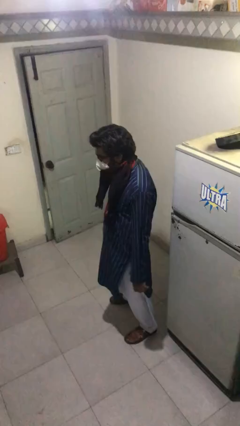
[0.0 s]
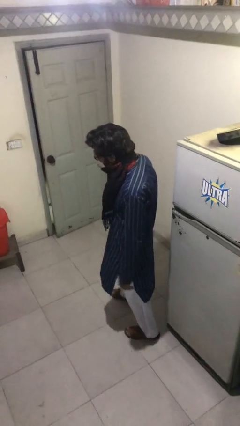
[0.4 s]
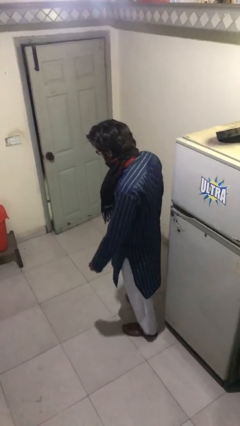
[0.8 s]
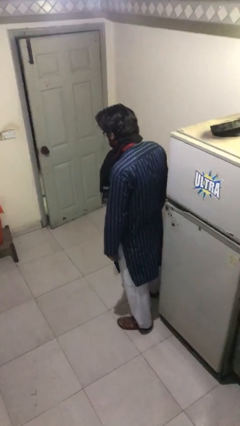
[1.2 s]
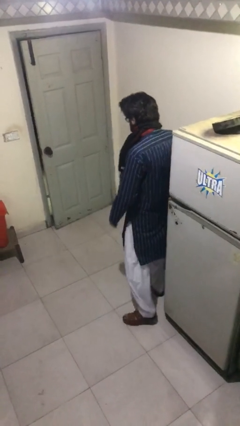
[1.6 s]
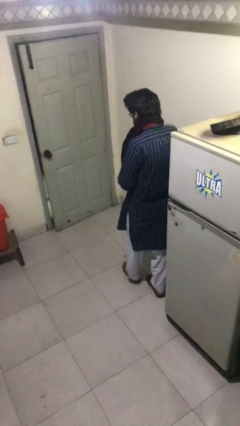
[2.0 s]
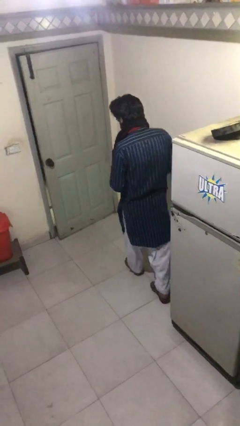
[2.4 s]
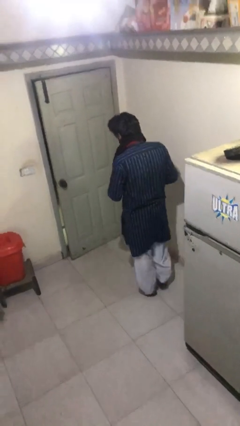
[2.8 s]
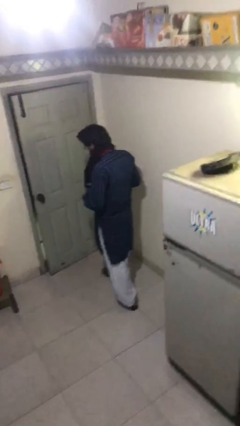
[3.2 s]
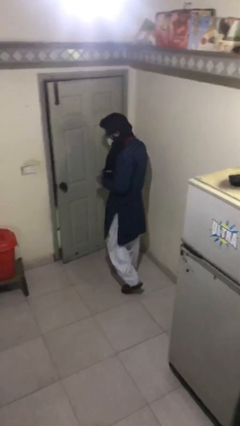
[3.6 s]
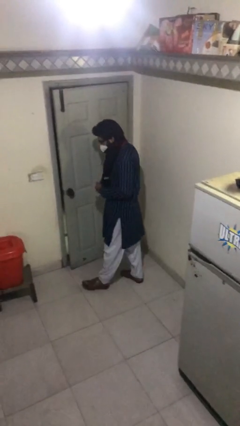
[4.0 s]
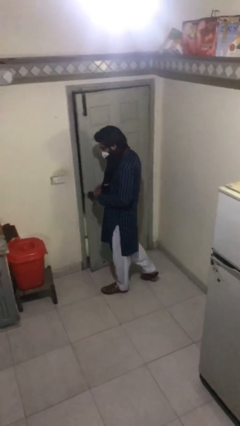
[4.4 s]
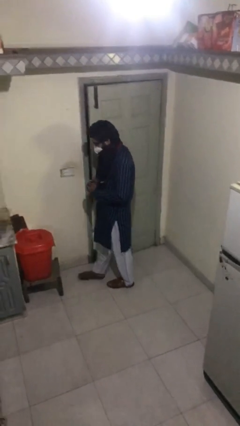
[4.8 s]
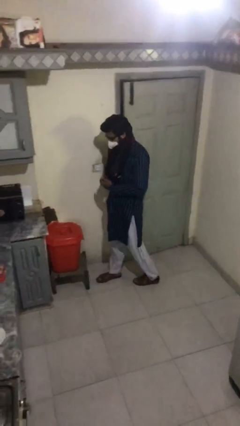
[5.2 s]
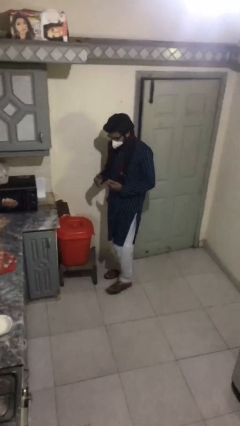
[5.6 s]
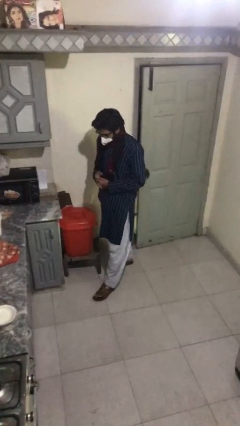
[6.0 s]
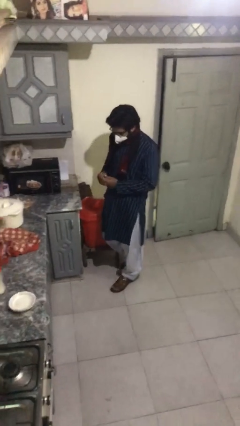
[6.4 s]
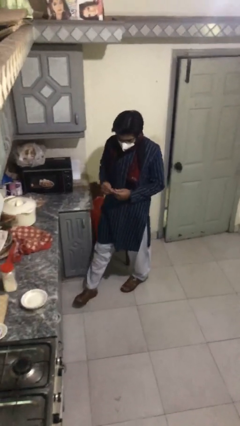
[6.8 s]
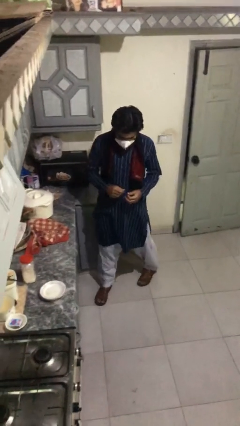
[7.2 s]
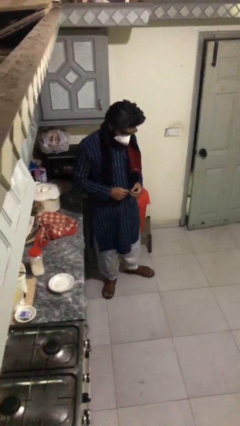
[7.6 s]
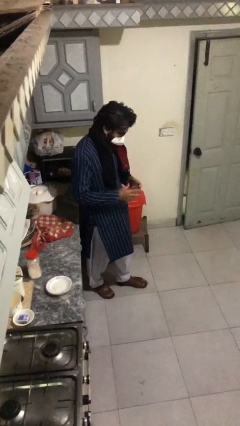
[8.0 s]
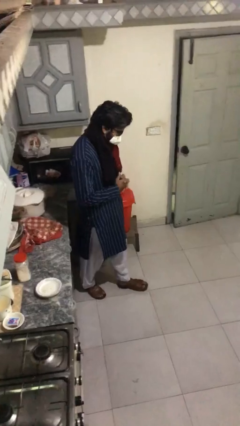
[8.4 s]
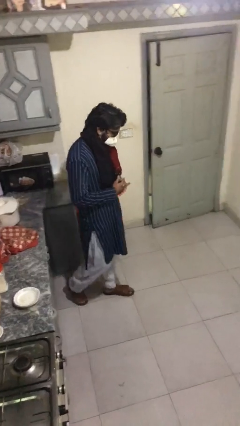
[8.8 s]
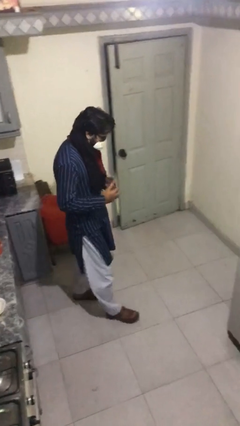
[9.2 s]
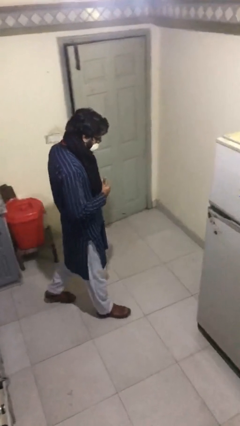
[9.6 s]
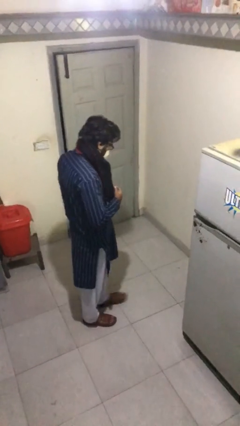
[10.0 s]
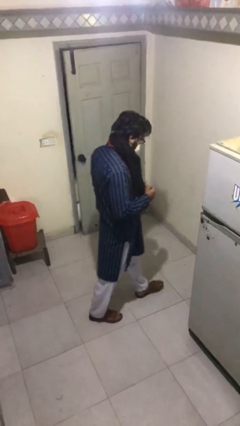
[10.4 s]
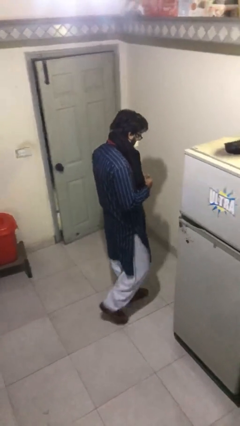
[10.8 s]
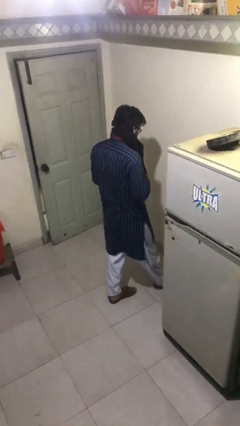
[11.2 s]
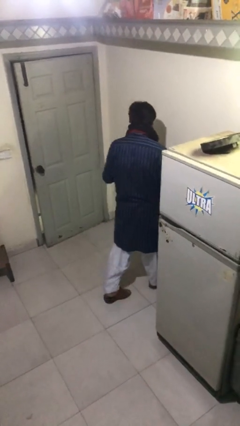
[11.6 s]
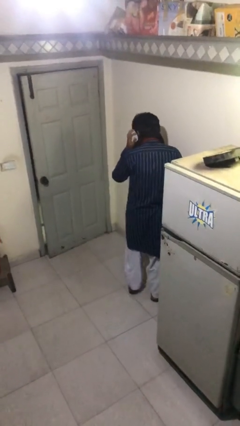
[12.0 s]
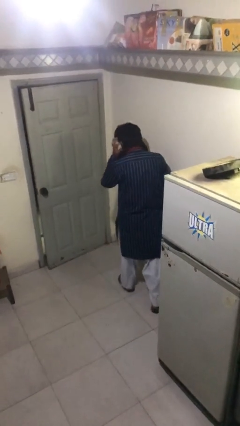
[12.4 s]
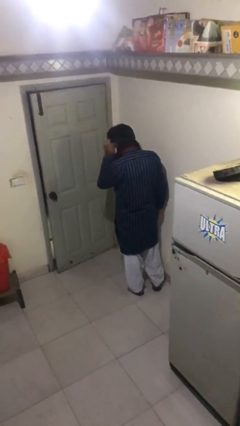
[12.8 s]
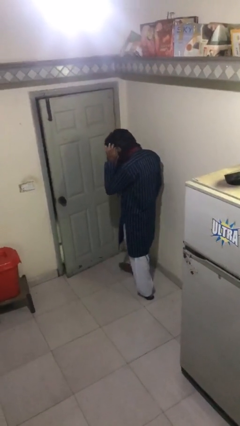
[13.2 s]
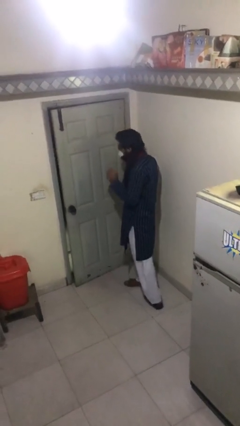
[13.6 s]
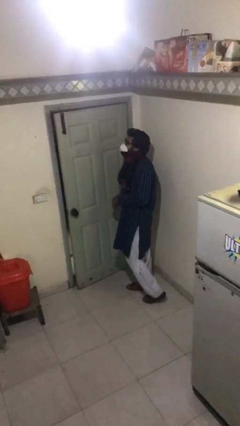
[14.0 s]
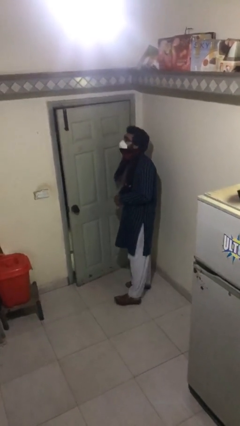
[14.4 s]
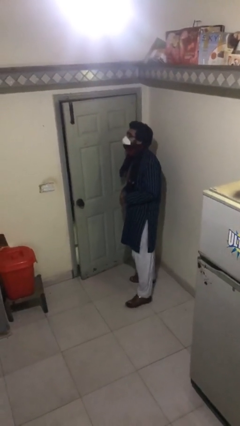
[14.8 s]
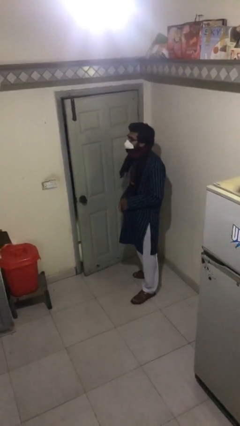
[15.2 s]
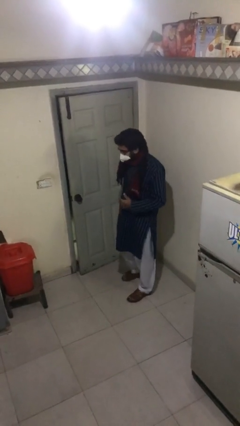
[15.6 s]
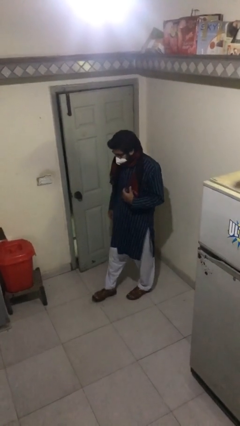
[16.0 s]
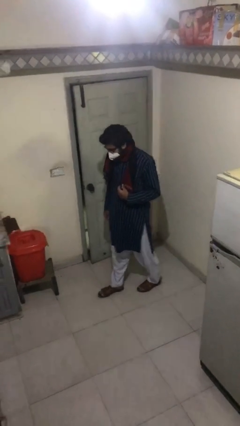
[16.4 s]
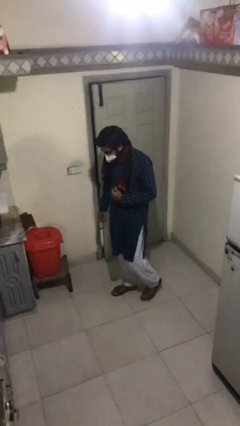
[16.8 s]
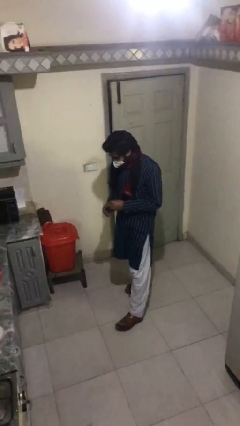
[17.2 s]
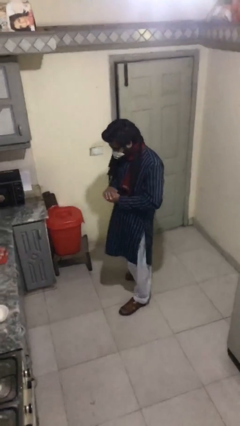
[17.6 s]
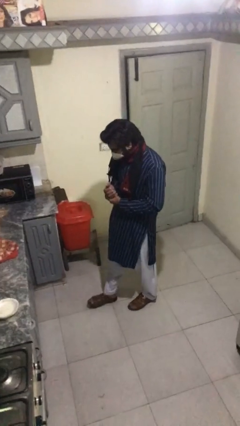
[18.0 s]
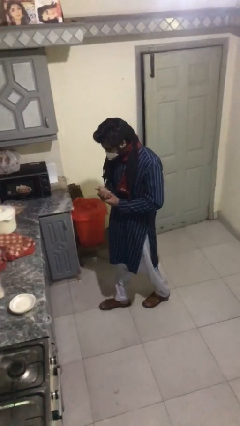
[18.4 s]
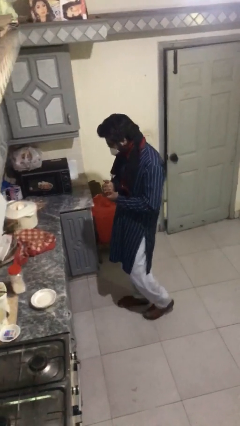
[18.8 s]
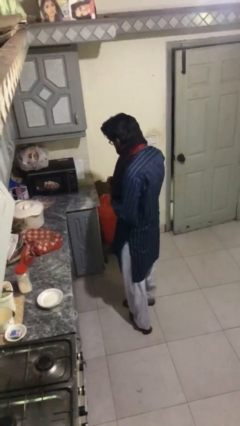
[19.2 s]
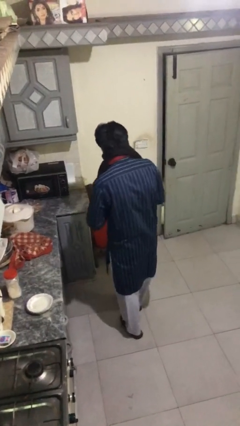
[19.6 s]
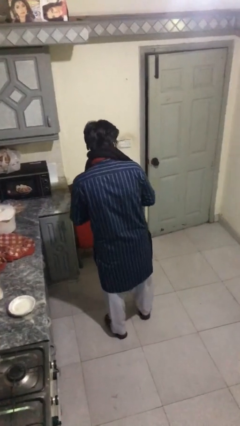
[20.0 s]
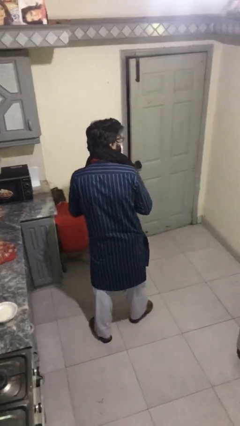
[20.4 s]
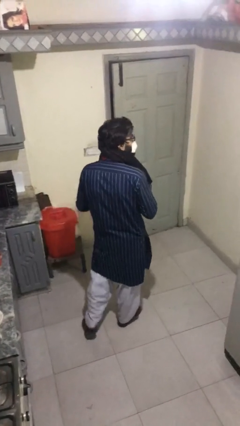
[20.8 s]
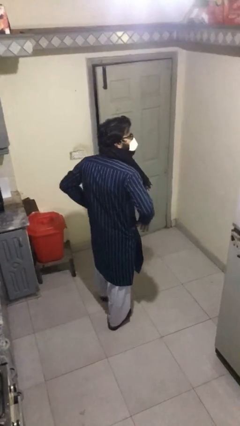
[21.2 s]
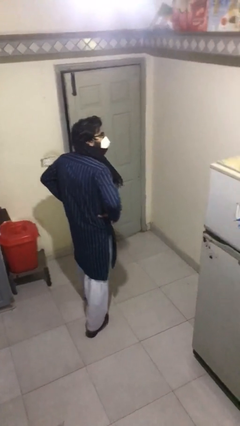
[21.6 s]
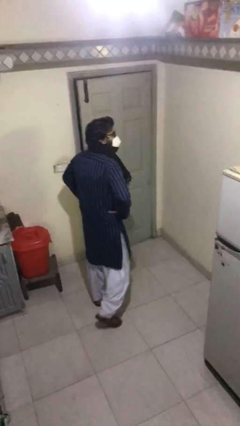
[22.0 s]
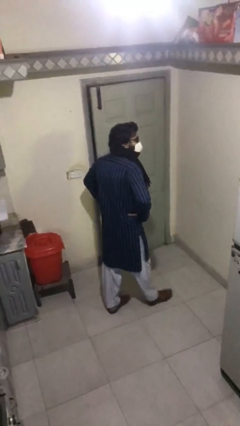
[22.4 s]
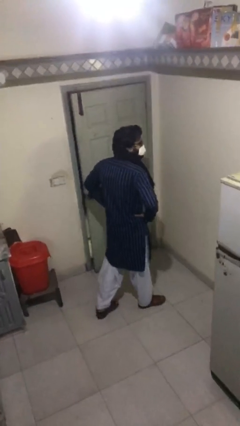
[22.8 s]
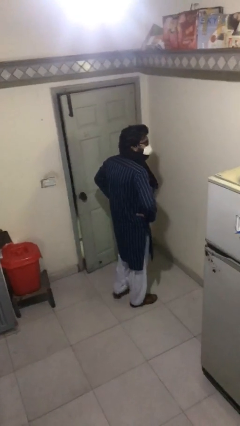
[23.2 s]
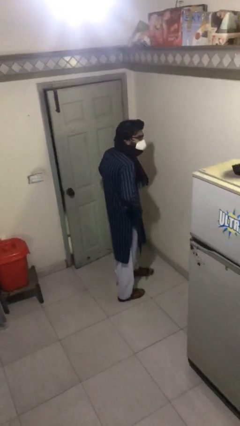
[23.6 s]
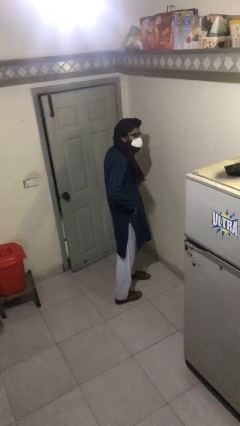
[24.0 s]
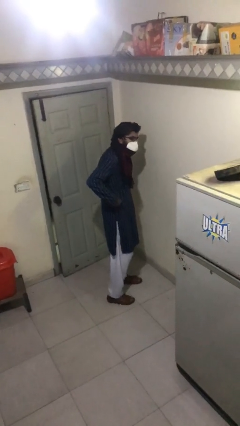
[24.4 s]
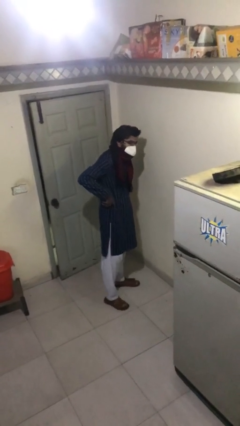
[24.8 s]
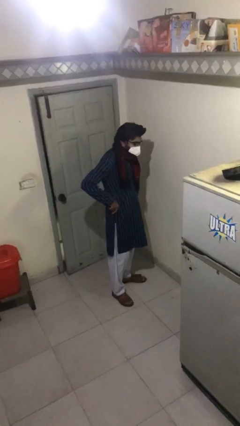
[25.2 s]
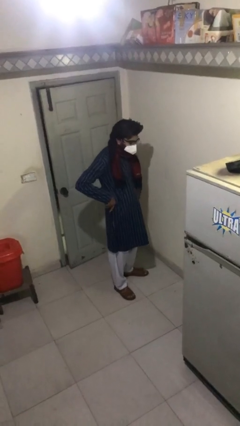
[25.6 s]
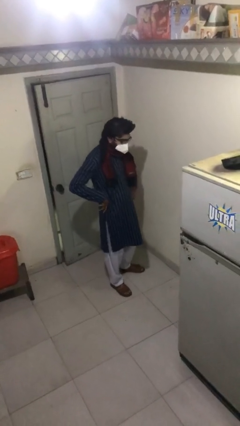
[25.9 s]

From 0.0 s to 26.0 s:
person walks

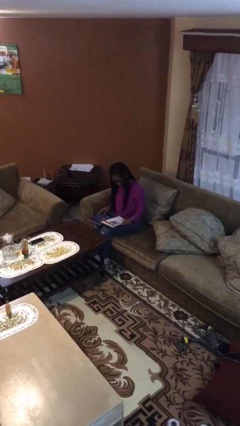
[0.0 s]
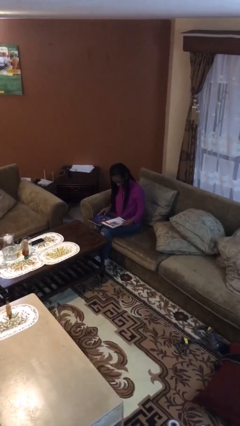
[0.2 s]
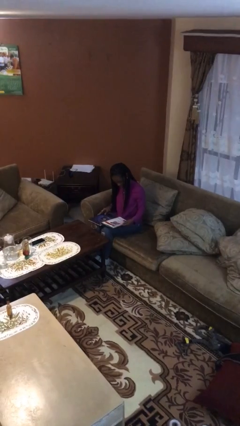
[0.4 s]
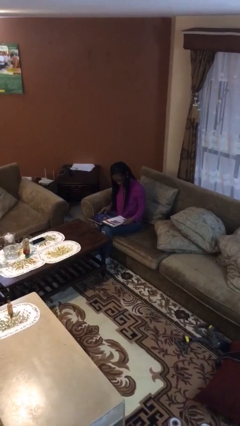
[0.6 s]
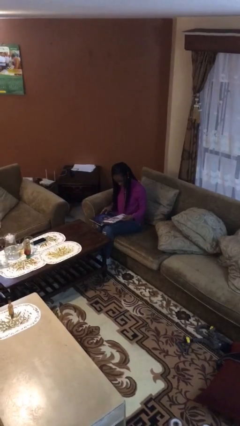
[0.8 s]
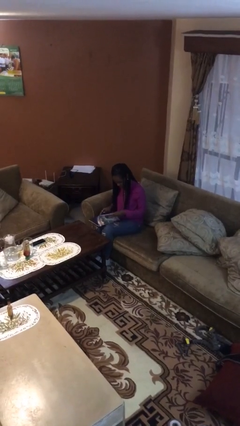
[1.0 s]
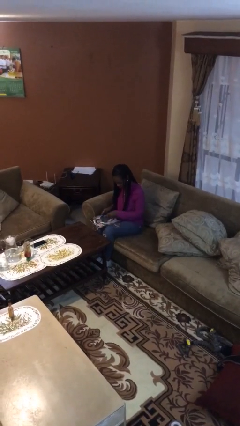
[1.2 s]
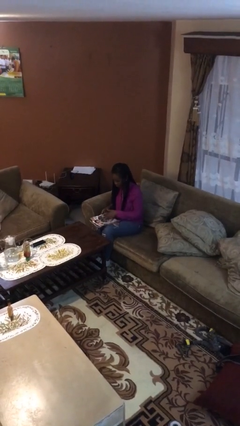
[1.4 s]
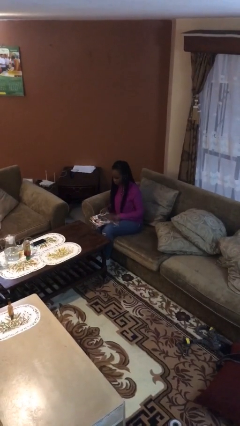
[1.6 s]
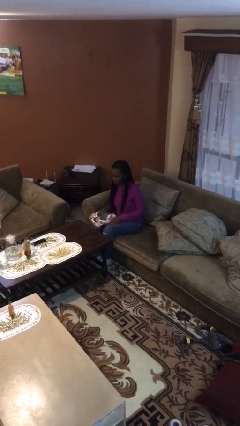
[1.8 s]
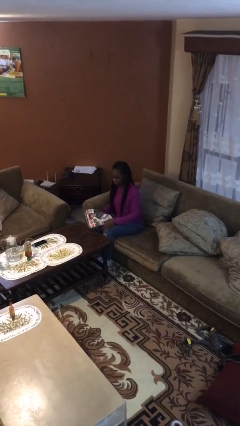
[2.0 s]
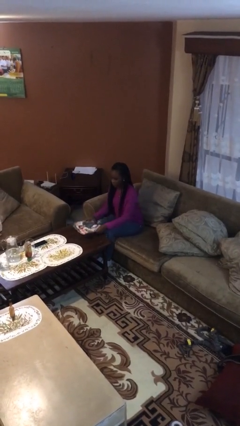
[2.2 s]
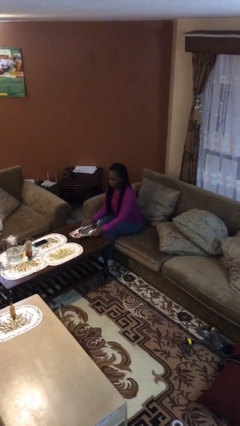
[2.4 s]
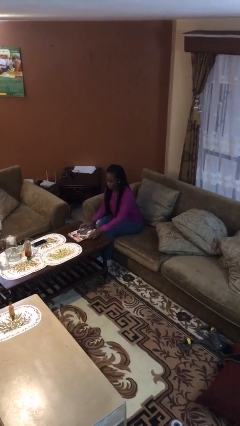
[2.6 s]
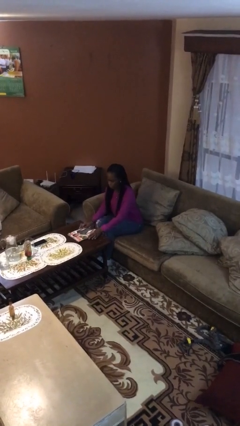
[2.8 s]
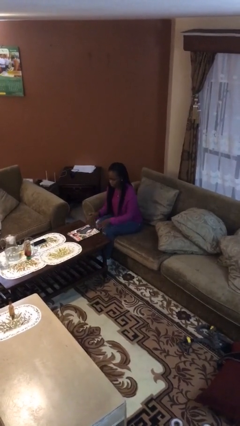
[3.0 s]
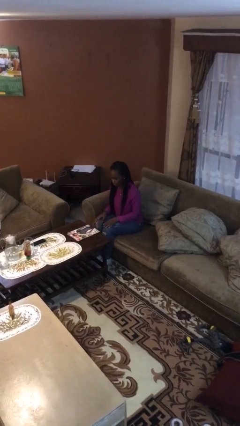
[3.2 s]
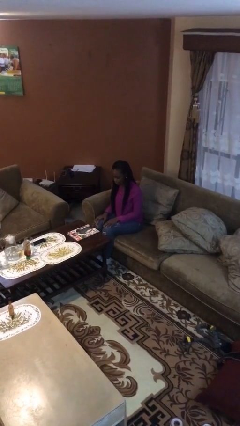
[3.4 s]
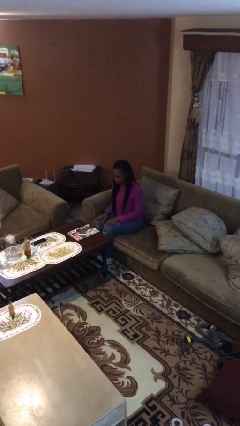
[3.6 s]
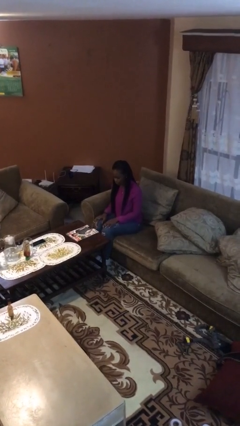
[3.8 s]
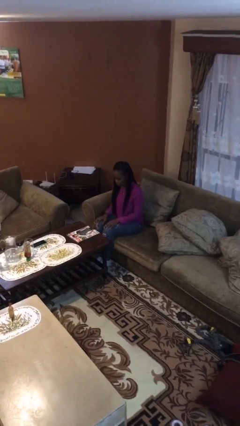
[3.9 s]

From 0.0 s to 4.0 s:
person puts down object on table

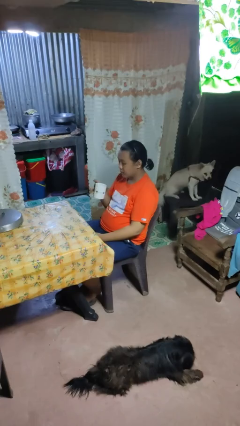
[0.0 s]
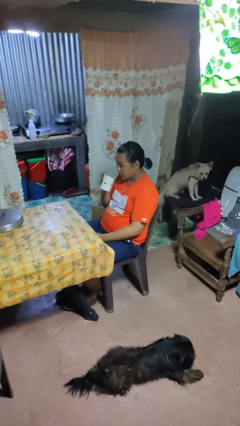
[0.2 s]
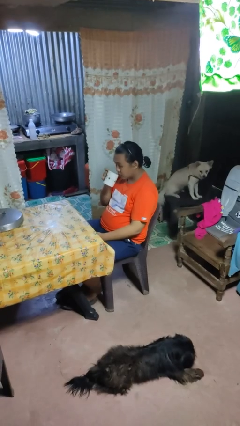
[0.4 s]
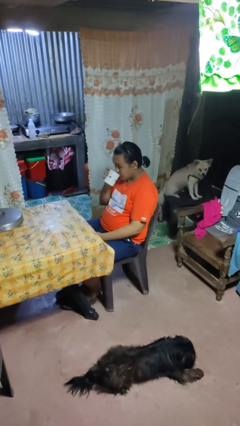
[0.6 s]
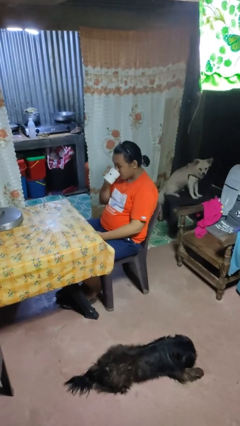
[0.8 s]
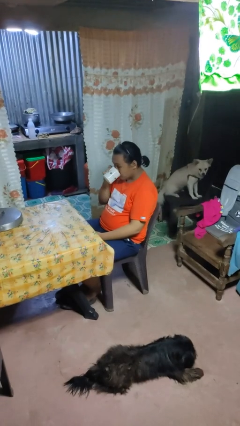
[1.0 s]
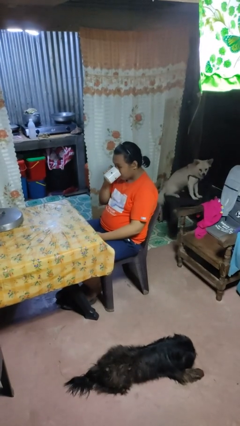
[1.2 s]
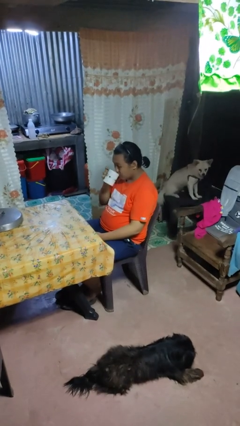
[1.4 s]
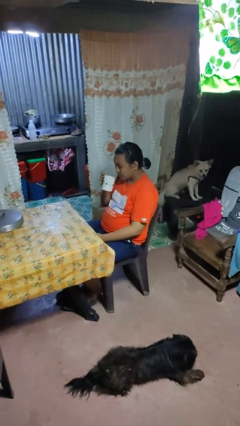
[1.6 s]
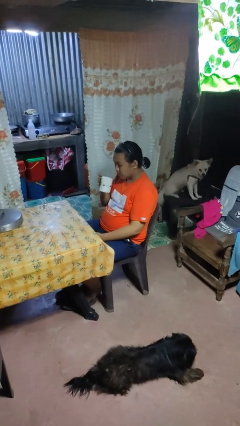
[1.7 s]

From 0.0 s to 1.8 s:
person drinks from mug
